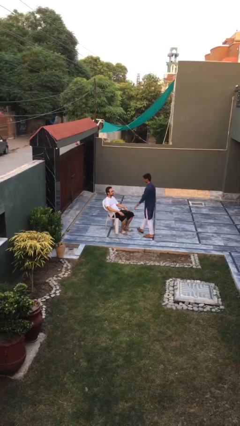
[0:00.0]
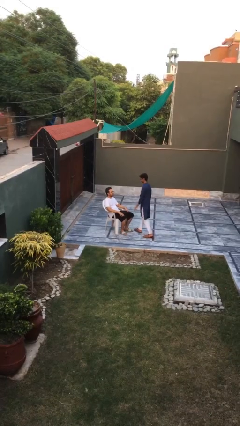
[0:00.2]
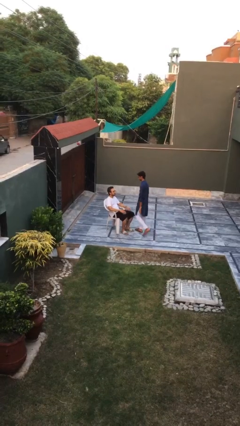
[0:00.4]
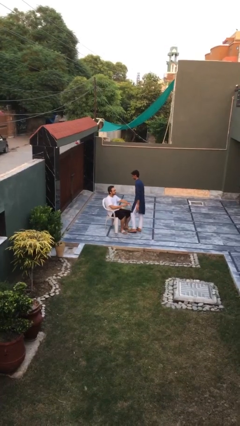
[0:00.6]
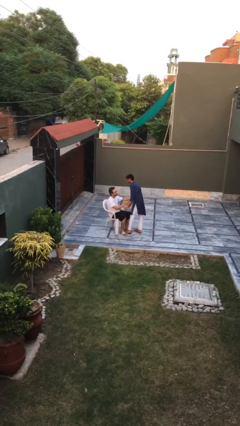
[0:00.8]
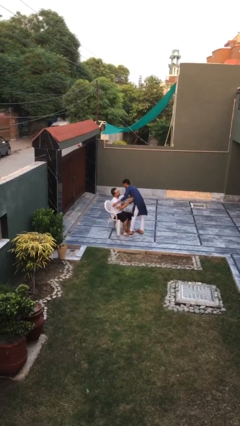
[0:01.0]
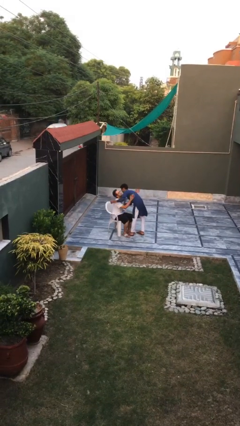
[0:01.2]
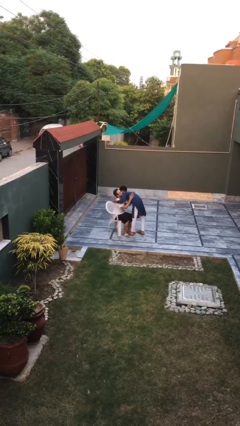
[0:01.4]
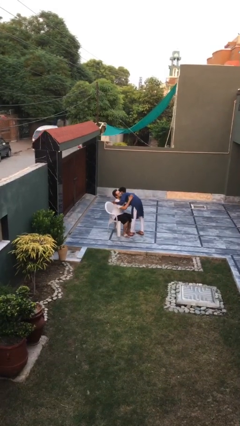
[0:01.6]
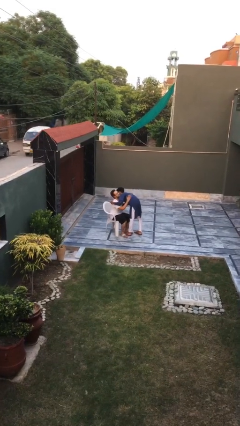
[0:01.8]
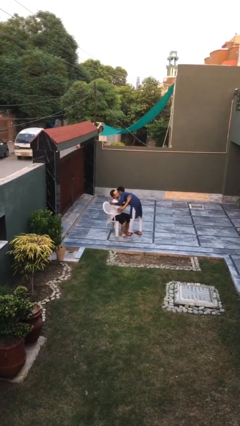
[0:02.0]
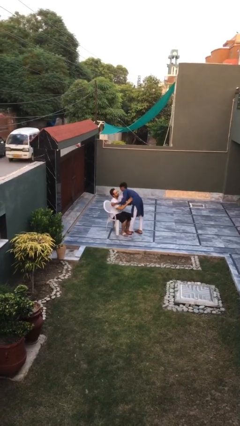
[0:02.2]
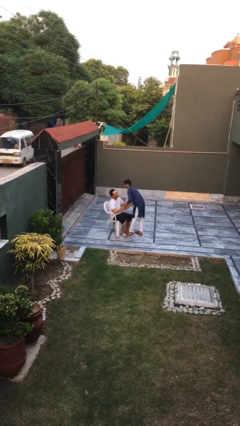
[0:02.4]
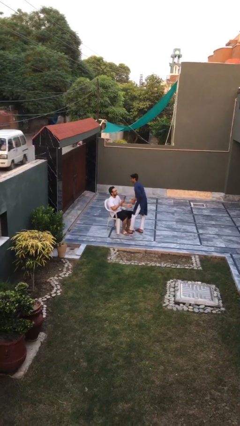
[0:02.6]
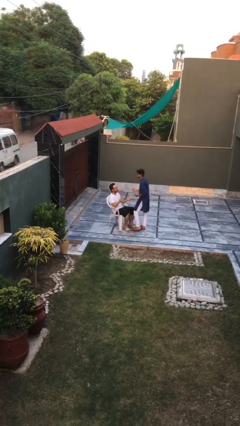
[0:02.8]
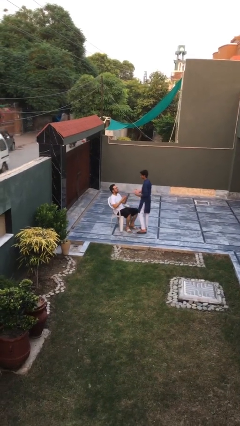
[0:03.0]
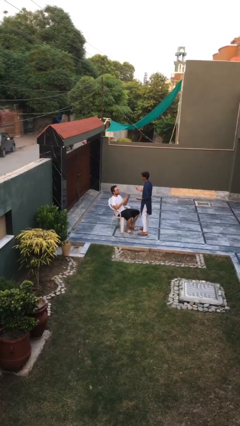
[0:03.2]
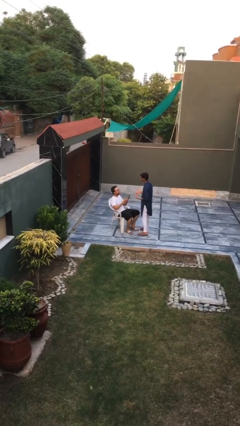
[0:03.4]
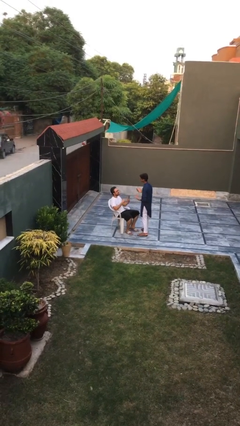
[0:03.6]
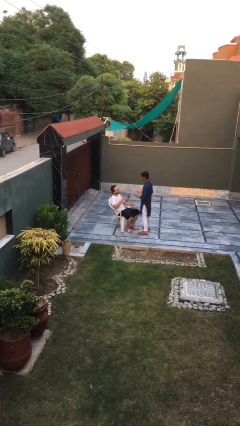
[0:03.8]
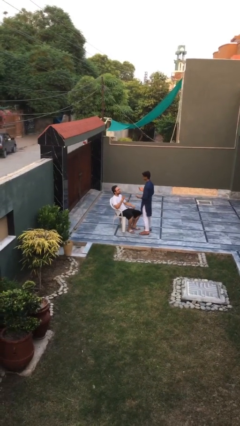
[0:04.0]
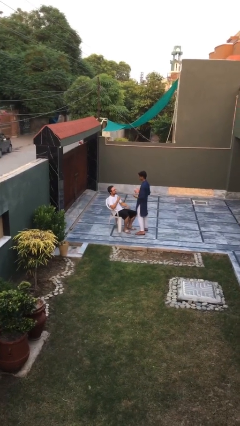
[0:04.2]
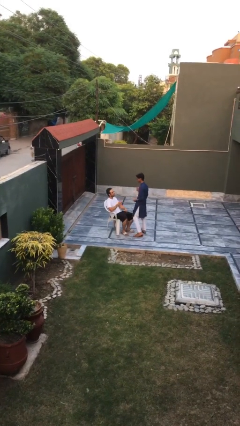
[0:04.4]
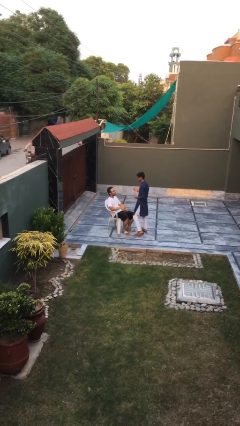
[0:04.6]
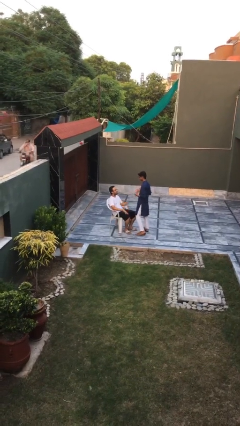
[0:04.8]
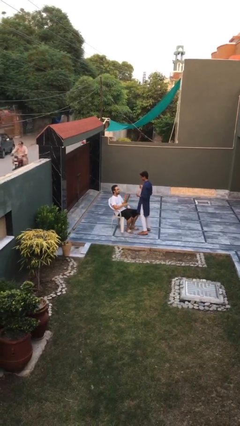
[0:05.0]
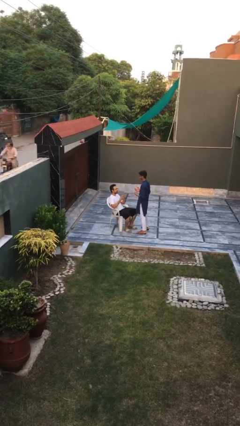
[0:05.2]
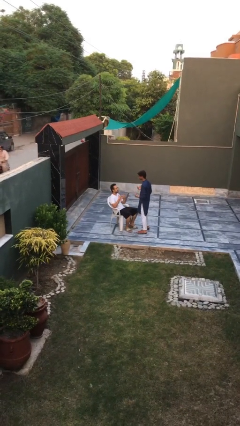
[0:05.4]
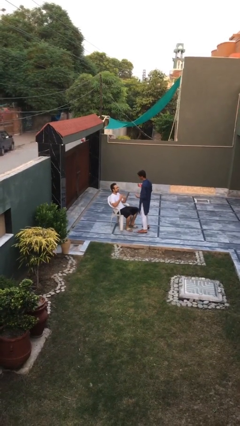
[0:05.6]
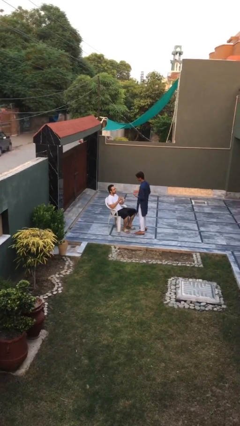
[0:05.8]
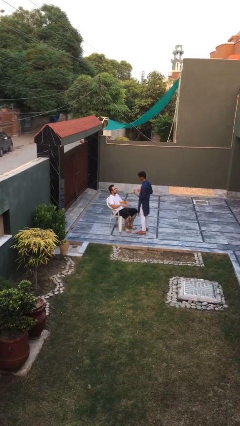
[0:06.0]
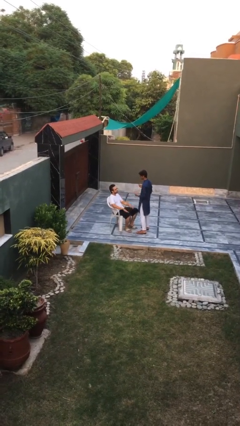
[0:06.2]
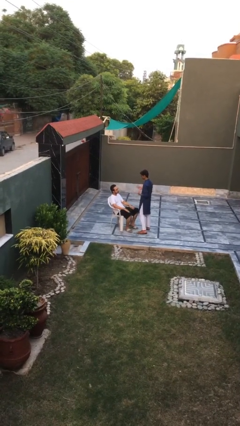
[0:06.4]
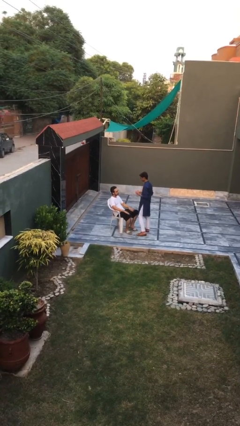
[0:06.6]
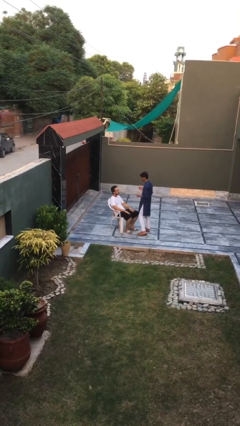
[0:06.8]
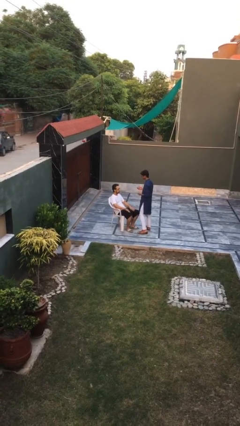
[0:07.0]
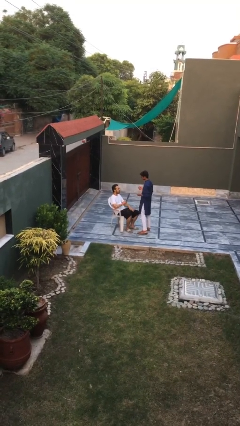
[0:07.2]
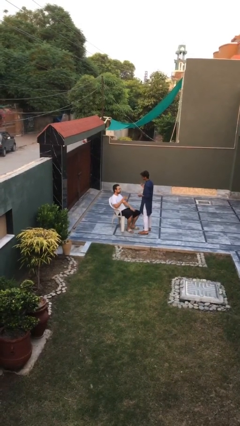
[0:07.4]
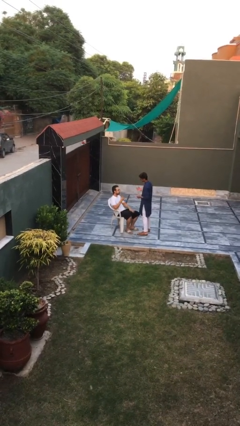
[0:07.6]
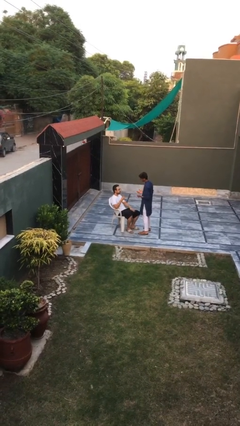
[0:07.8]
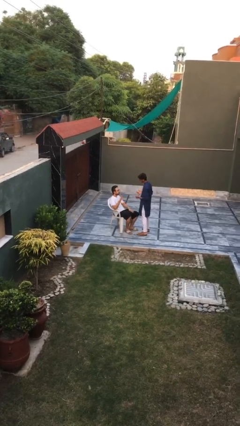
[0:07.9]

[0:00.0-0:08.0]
person embraces person

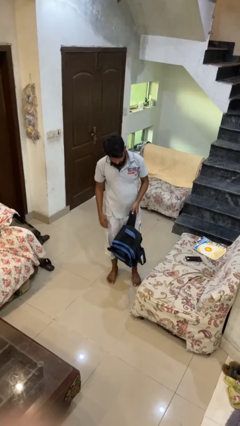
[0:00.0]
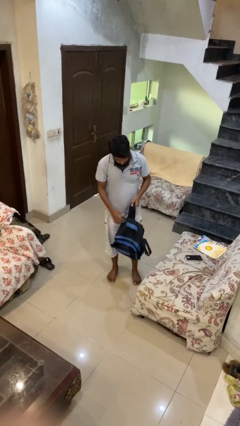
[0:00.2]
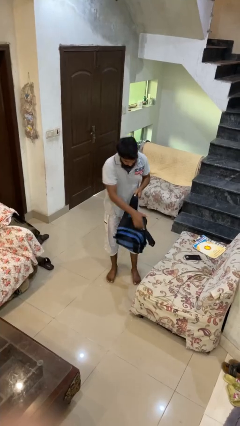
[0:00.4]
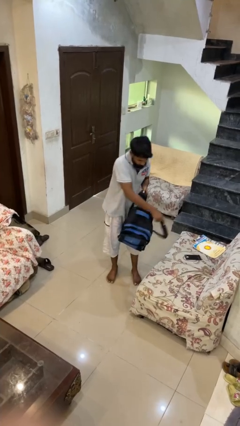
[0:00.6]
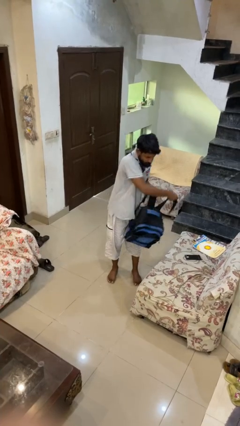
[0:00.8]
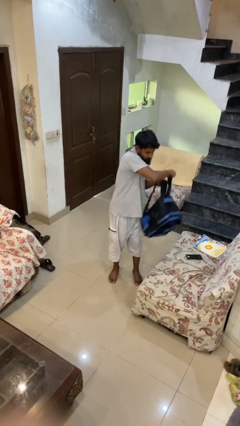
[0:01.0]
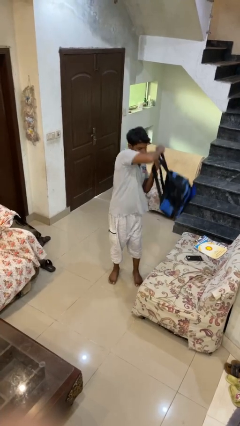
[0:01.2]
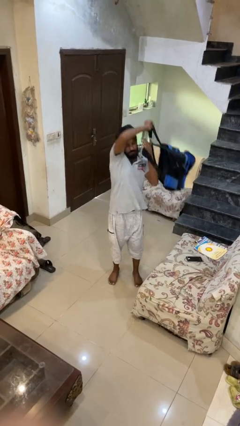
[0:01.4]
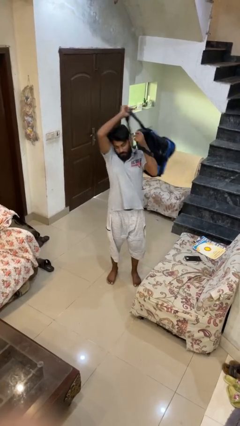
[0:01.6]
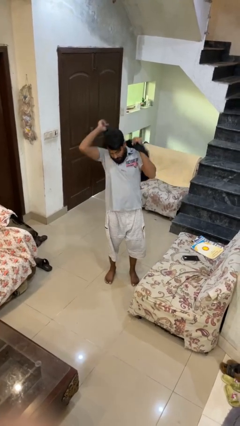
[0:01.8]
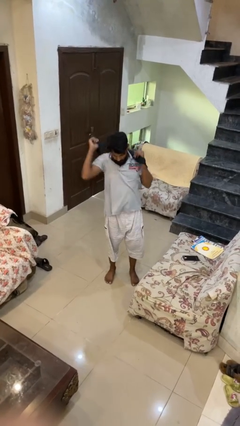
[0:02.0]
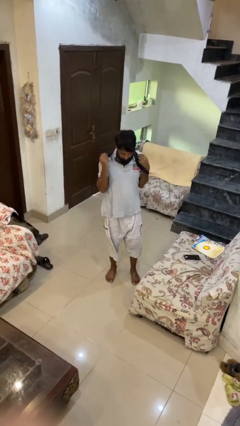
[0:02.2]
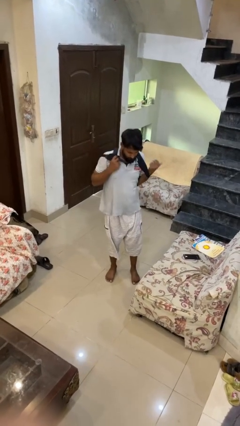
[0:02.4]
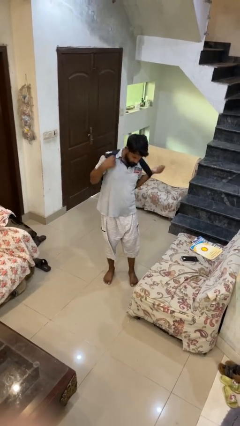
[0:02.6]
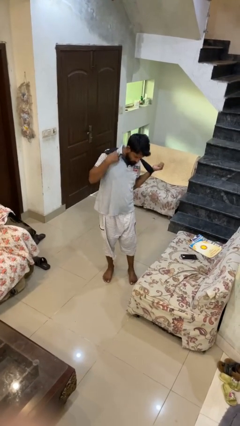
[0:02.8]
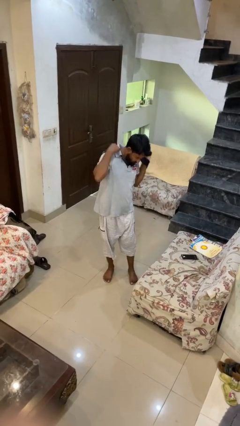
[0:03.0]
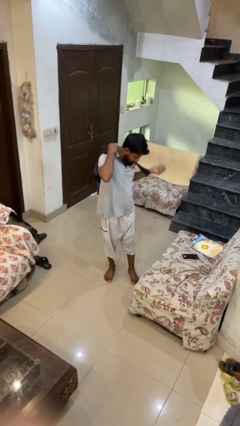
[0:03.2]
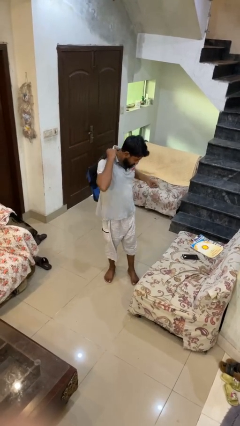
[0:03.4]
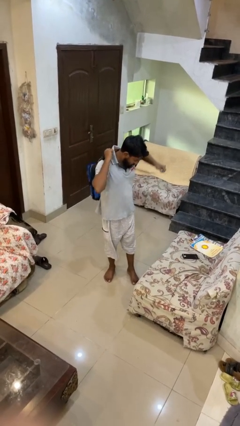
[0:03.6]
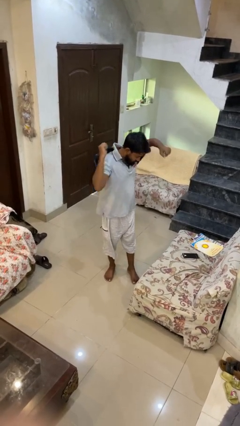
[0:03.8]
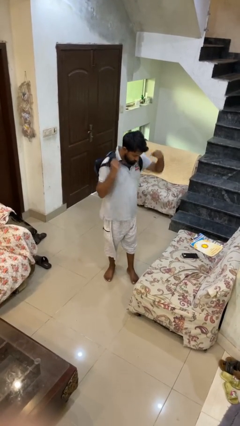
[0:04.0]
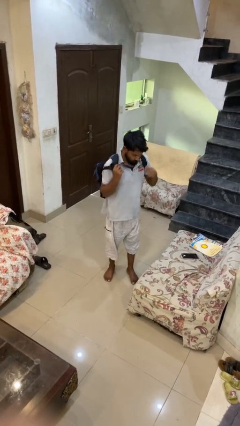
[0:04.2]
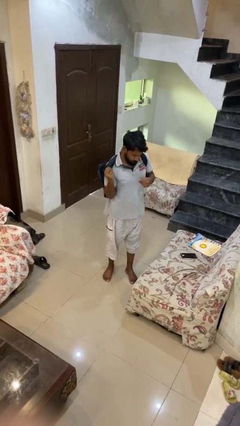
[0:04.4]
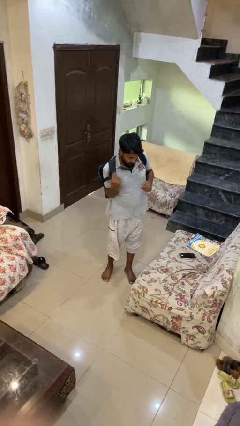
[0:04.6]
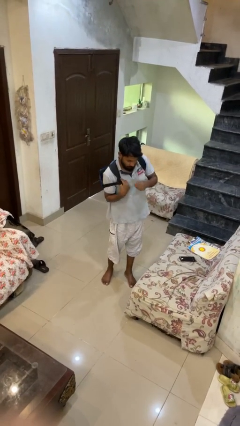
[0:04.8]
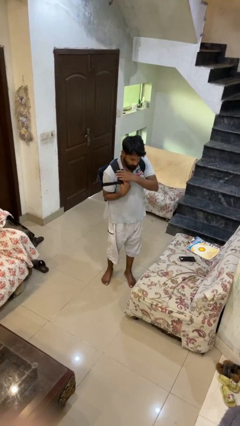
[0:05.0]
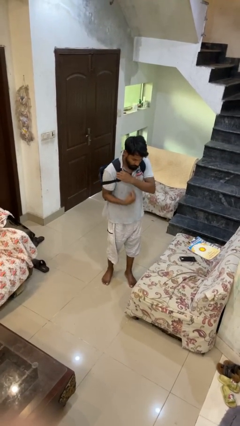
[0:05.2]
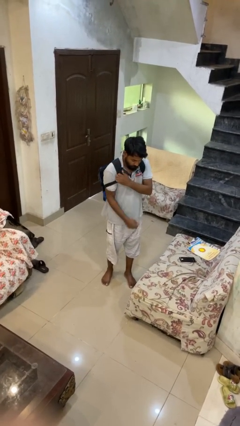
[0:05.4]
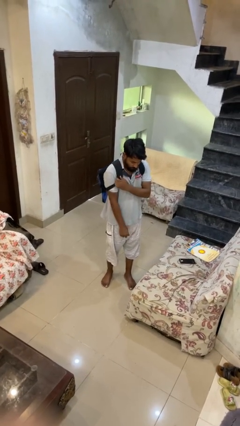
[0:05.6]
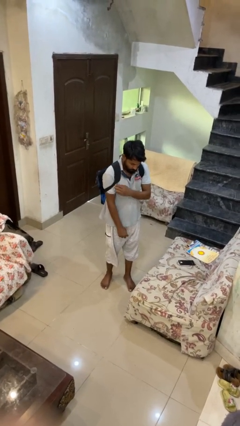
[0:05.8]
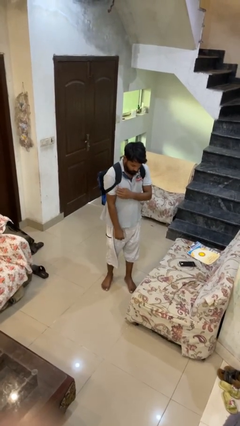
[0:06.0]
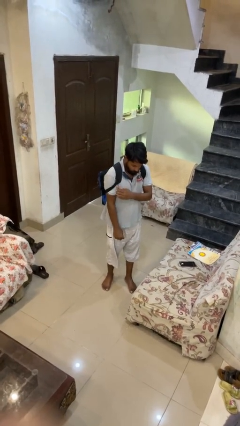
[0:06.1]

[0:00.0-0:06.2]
person puts on backpack

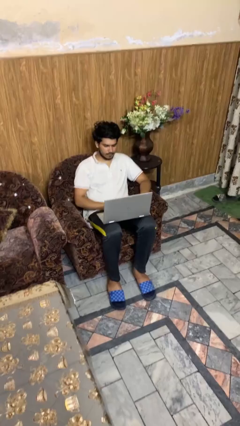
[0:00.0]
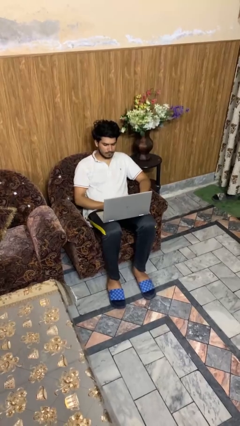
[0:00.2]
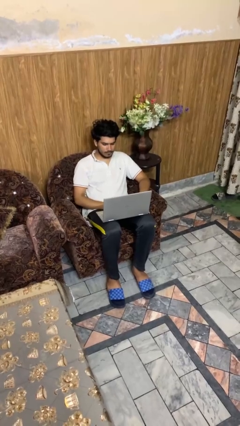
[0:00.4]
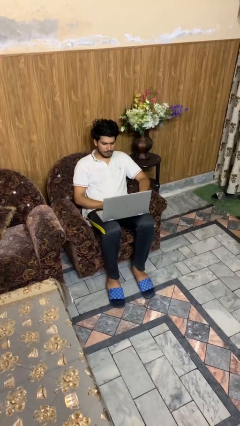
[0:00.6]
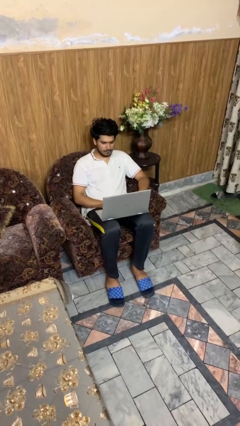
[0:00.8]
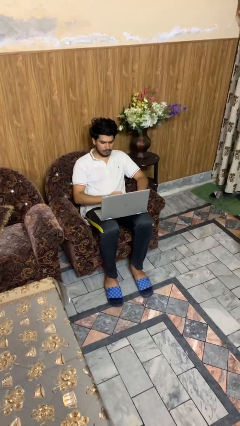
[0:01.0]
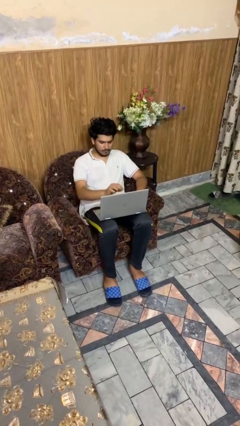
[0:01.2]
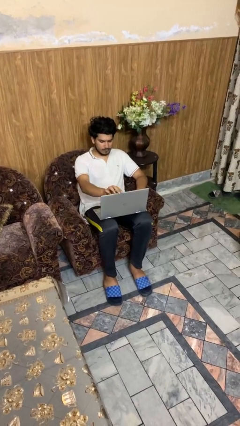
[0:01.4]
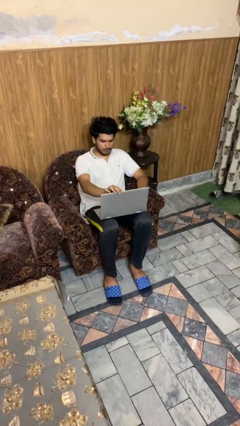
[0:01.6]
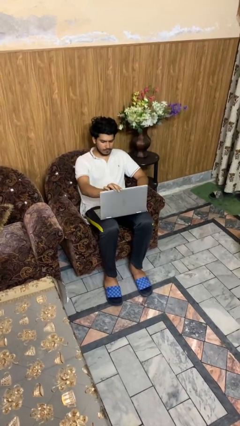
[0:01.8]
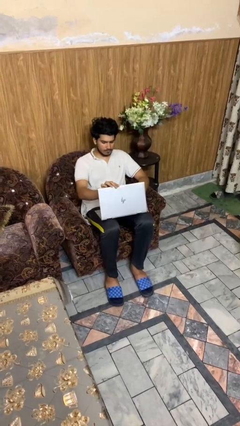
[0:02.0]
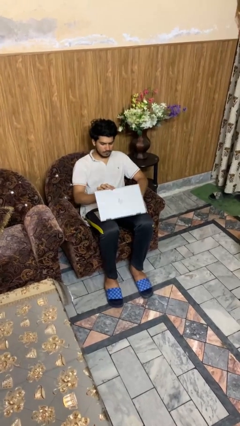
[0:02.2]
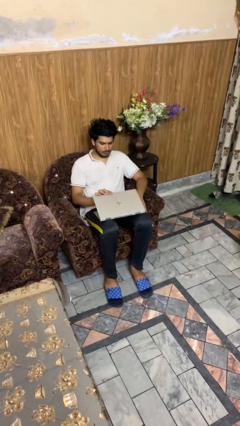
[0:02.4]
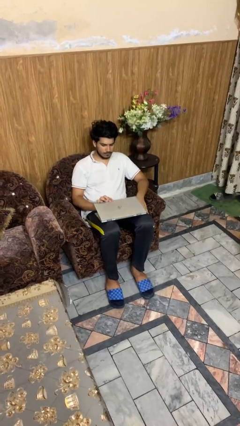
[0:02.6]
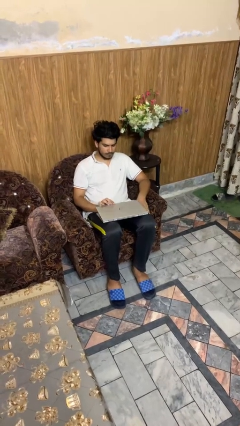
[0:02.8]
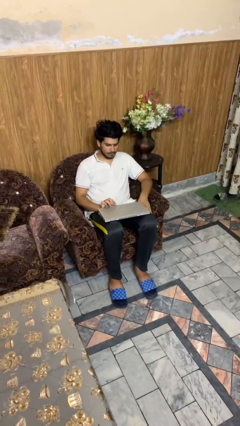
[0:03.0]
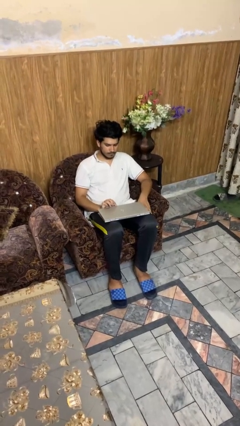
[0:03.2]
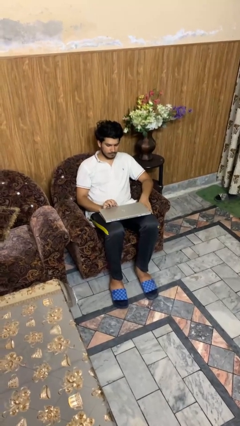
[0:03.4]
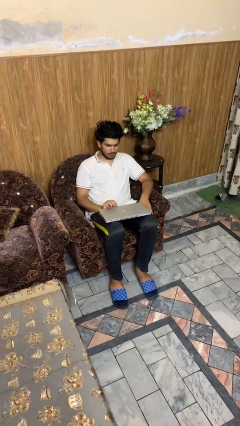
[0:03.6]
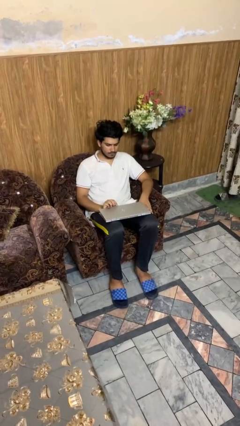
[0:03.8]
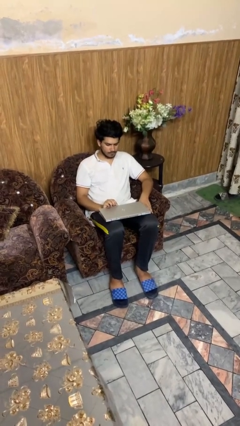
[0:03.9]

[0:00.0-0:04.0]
person closes laptop
